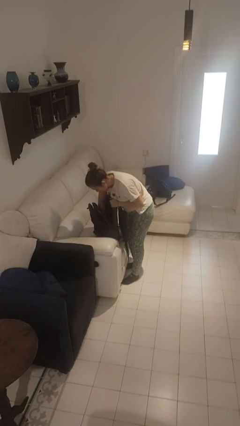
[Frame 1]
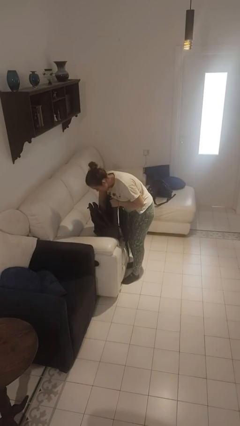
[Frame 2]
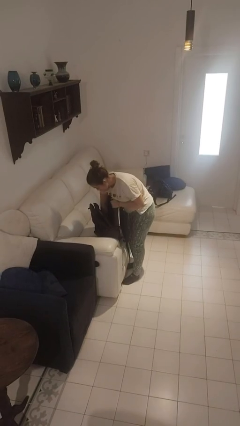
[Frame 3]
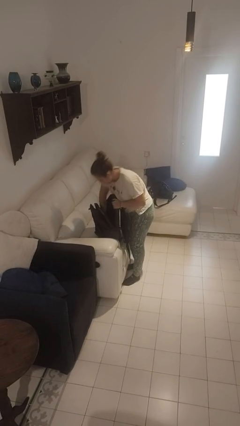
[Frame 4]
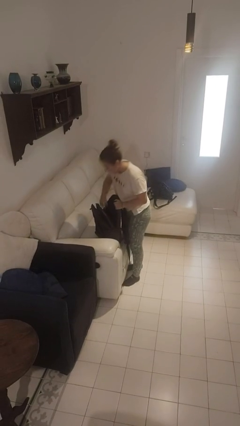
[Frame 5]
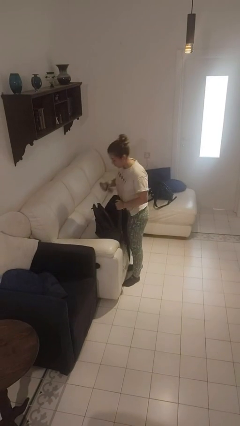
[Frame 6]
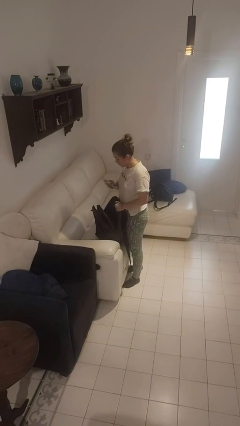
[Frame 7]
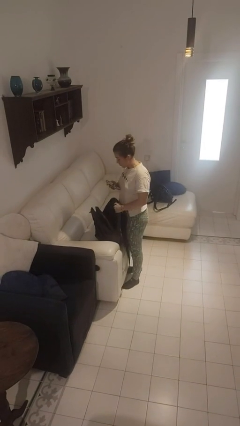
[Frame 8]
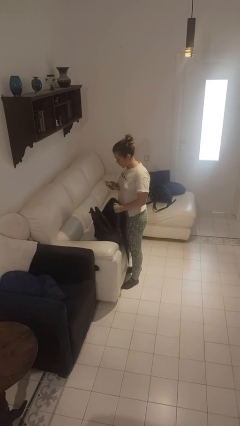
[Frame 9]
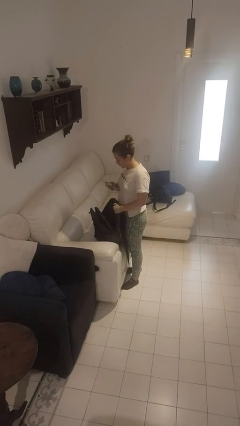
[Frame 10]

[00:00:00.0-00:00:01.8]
person takes object from backpack

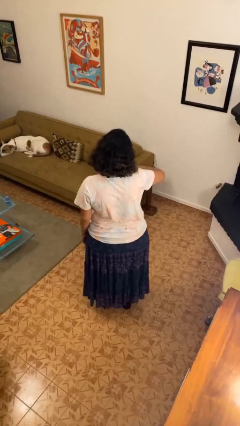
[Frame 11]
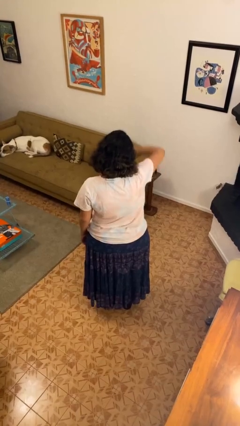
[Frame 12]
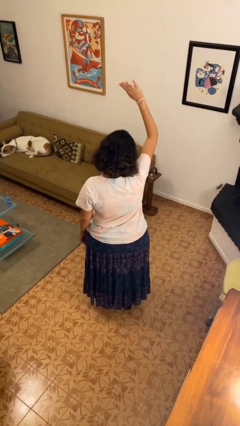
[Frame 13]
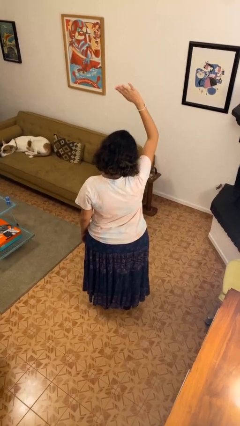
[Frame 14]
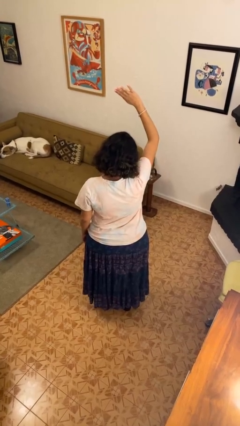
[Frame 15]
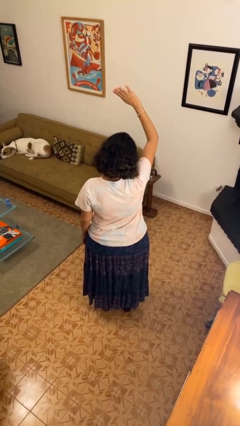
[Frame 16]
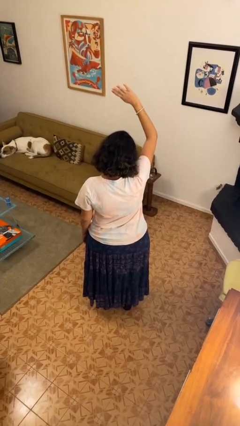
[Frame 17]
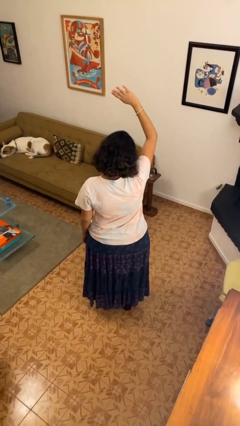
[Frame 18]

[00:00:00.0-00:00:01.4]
person gestures swipe up

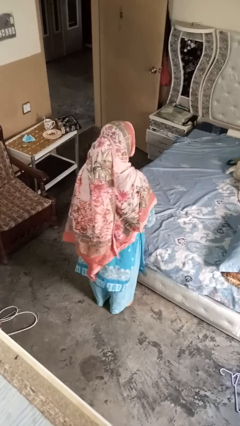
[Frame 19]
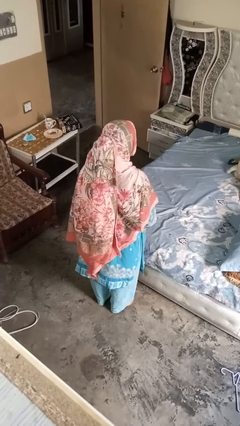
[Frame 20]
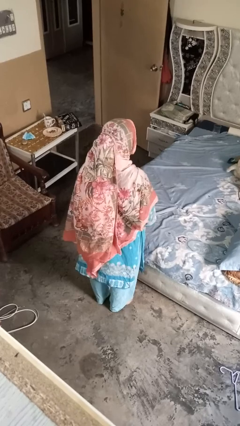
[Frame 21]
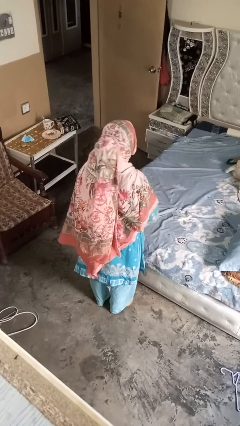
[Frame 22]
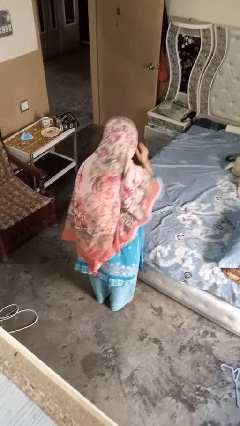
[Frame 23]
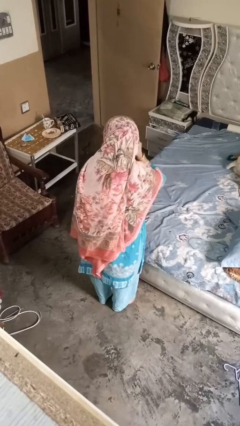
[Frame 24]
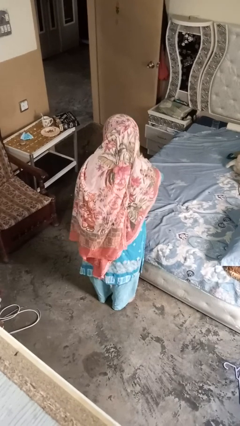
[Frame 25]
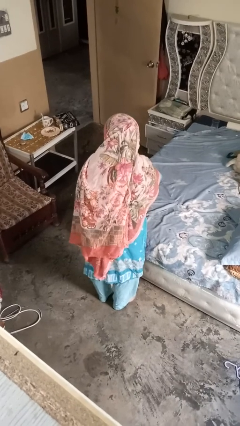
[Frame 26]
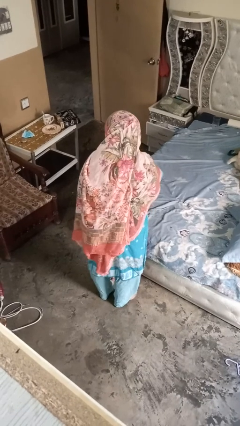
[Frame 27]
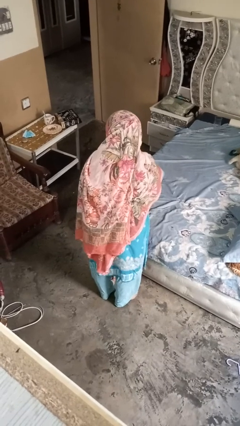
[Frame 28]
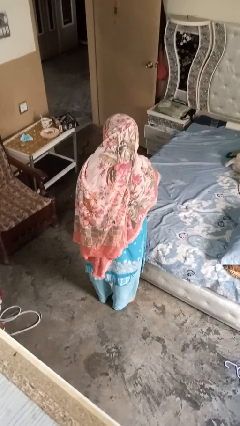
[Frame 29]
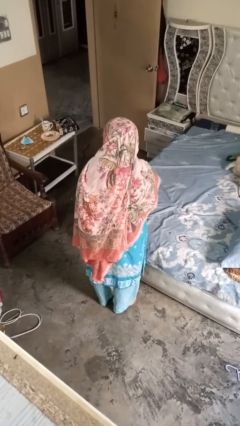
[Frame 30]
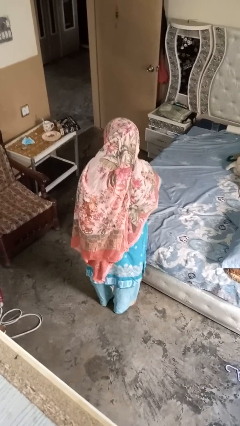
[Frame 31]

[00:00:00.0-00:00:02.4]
person gestures listen closely

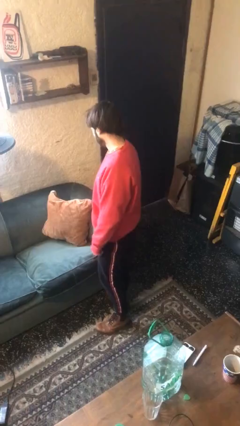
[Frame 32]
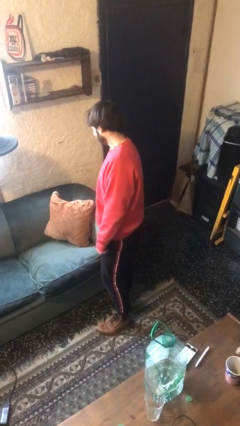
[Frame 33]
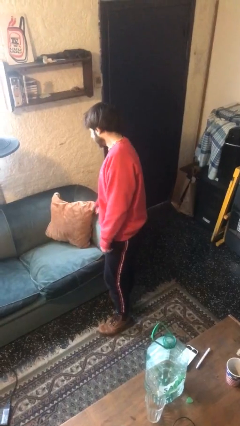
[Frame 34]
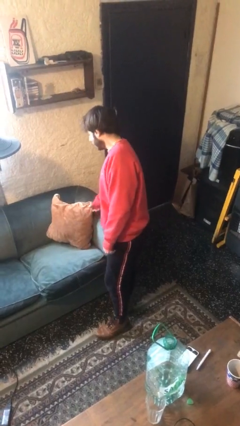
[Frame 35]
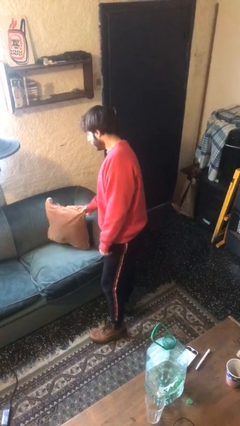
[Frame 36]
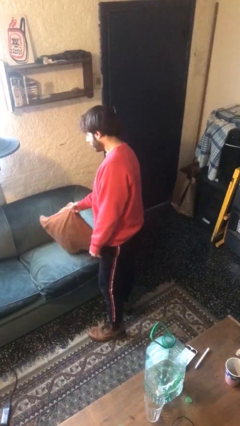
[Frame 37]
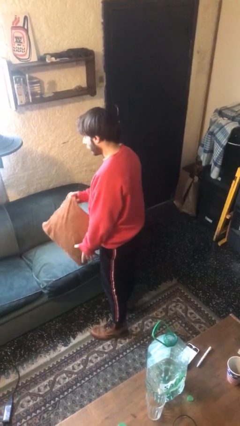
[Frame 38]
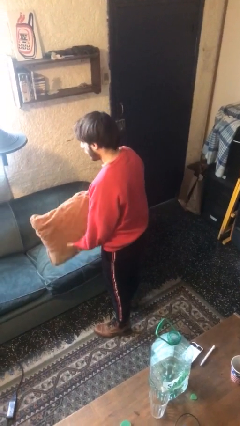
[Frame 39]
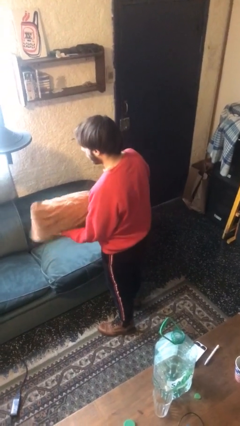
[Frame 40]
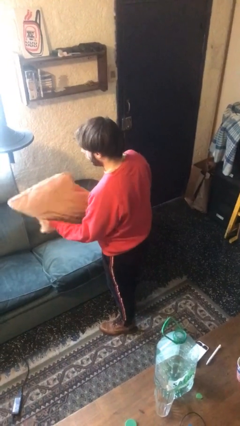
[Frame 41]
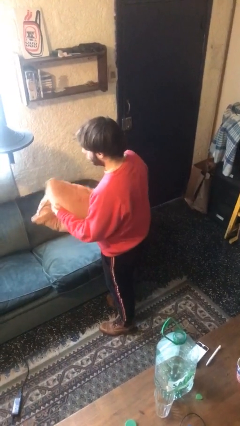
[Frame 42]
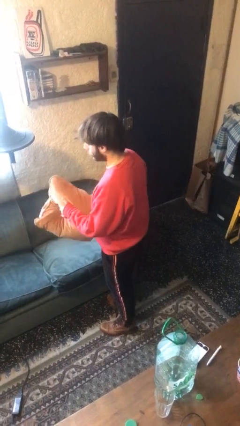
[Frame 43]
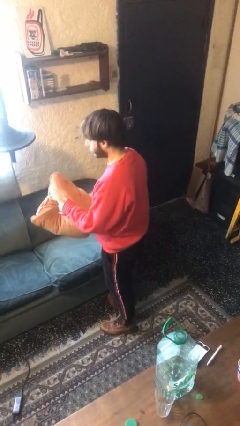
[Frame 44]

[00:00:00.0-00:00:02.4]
person picks up object from couch

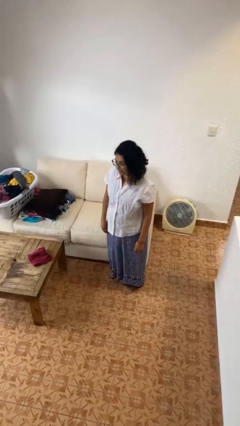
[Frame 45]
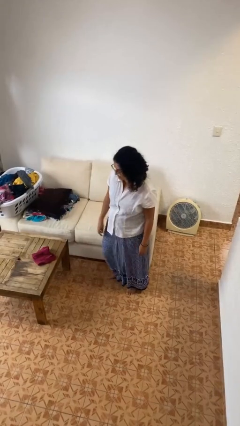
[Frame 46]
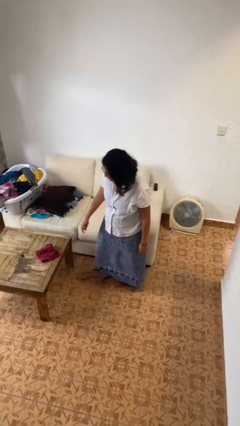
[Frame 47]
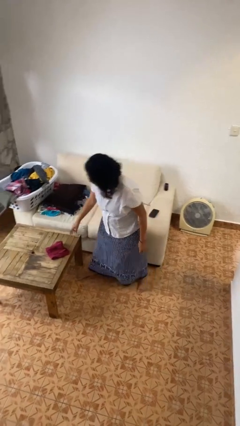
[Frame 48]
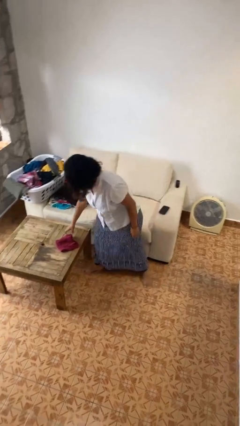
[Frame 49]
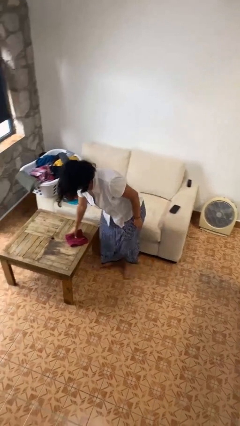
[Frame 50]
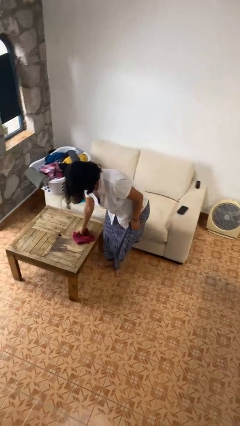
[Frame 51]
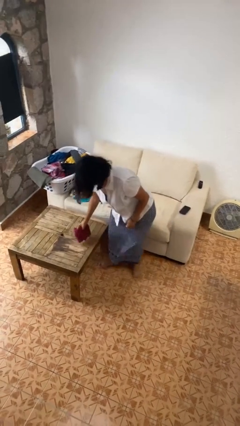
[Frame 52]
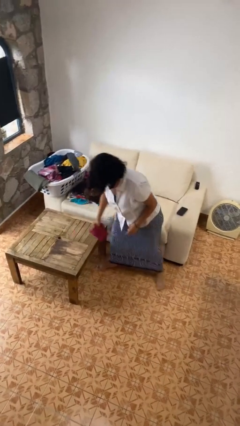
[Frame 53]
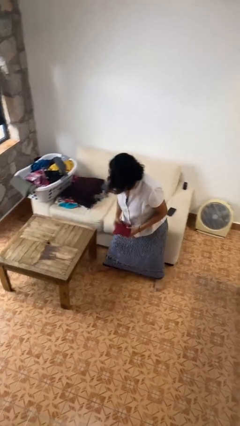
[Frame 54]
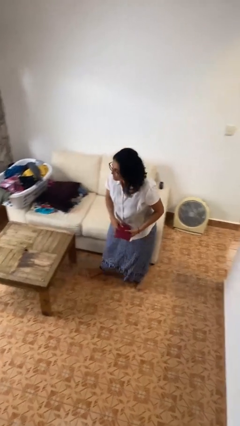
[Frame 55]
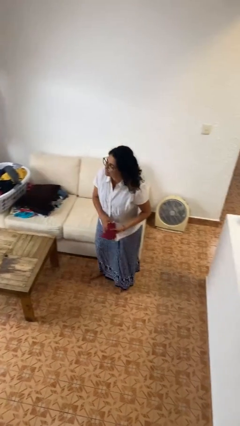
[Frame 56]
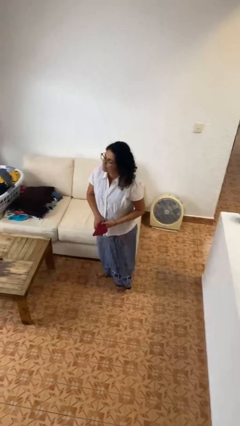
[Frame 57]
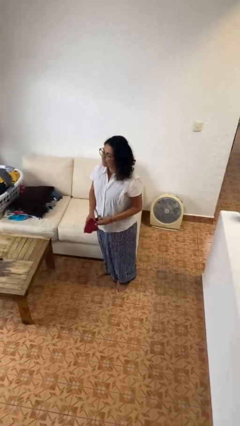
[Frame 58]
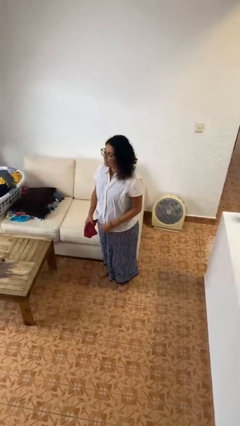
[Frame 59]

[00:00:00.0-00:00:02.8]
person picks up object from table

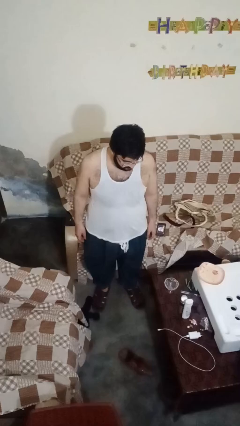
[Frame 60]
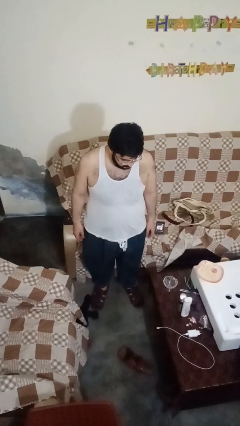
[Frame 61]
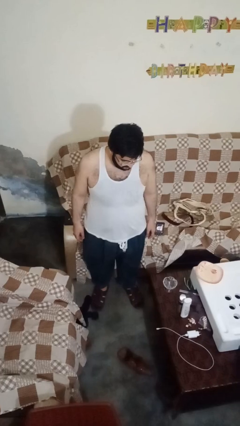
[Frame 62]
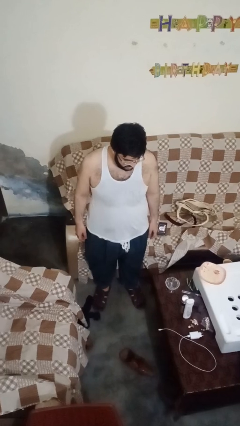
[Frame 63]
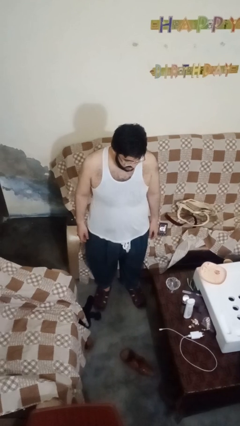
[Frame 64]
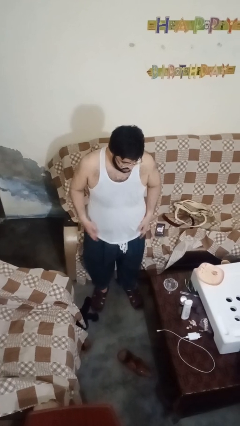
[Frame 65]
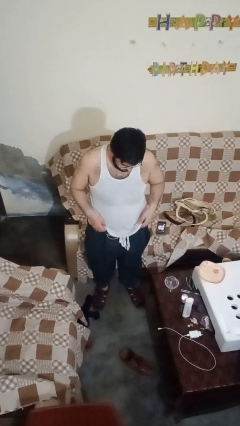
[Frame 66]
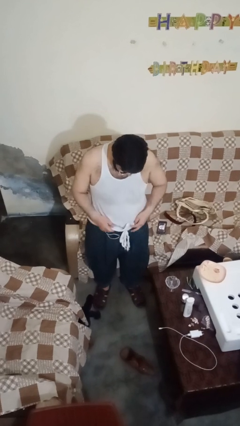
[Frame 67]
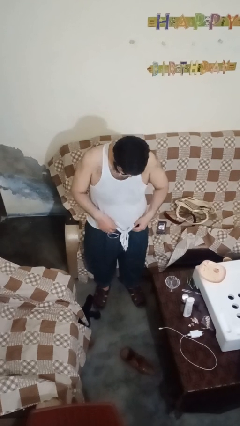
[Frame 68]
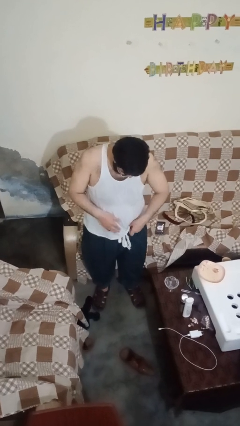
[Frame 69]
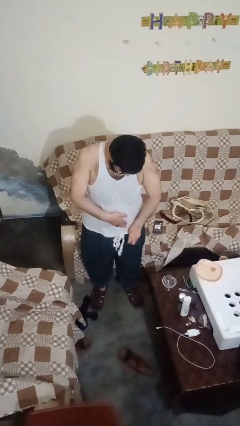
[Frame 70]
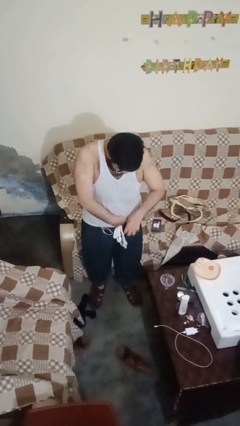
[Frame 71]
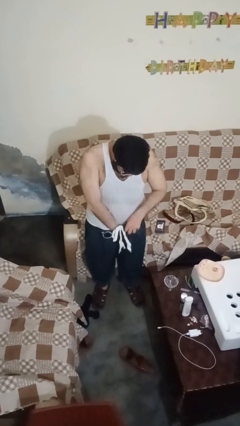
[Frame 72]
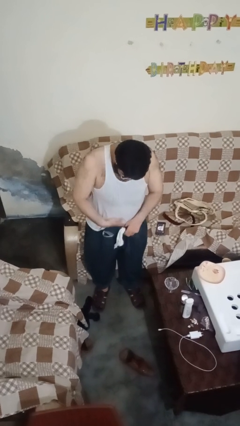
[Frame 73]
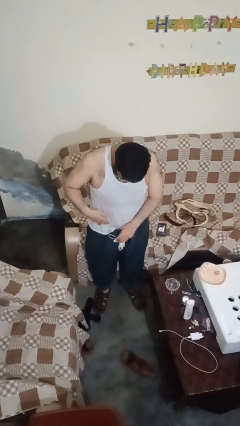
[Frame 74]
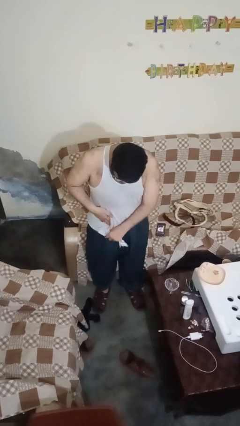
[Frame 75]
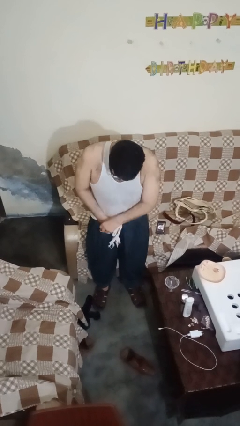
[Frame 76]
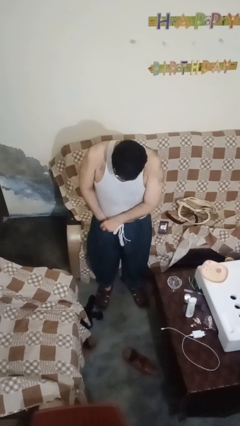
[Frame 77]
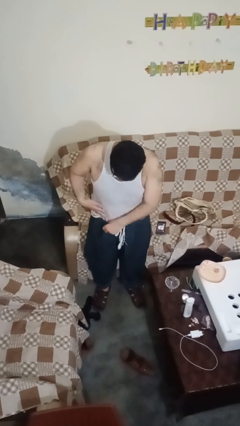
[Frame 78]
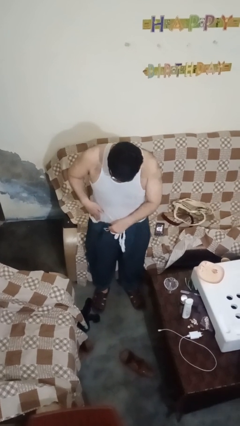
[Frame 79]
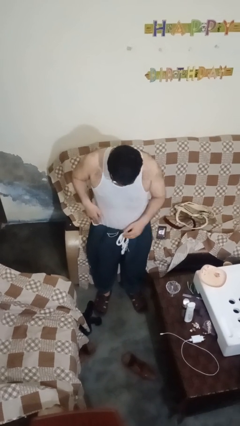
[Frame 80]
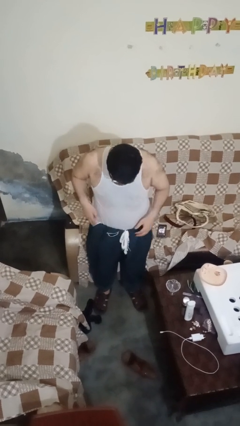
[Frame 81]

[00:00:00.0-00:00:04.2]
person tucks in shirt

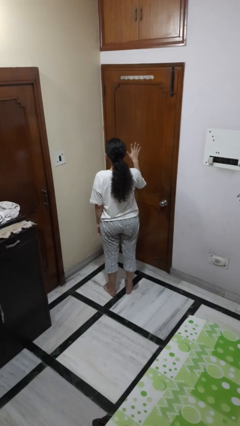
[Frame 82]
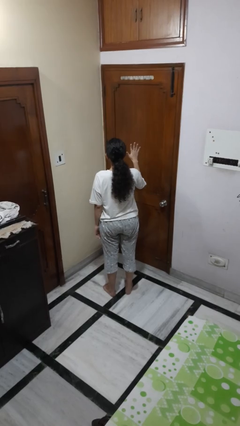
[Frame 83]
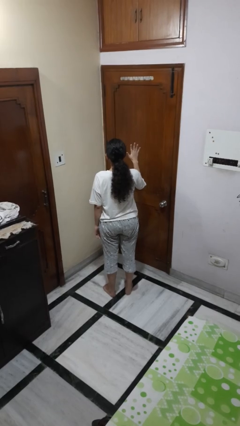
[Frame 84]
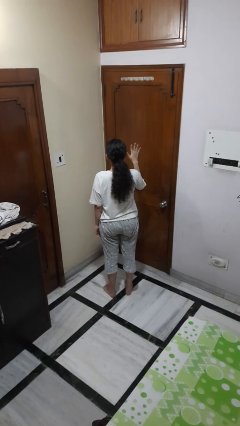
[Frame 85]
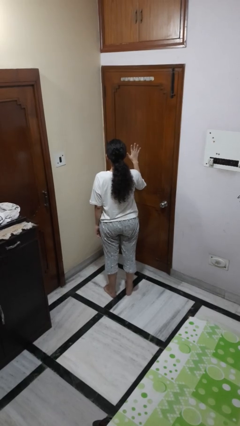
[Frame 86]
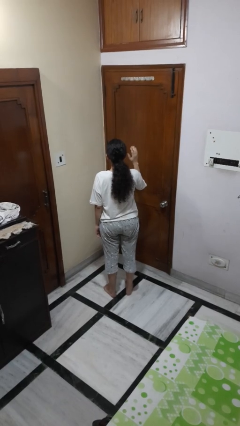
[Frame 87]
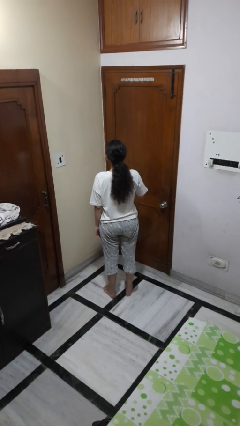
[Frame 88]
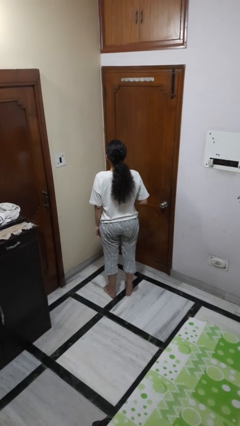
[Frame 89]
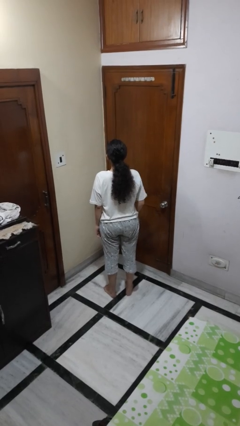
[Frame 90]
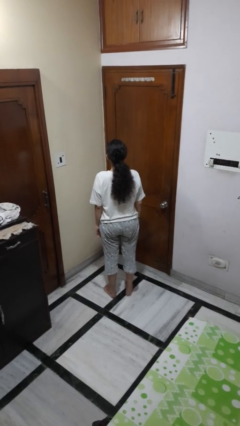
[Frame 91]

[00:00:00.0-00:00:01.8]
person gestures number five
